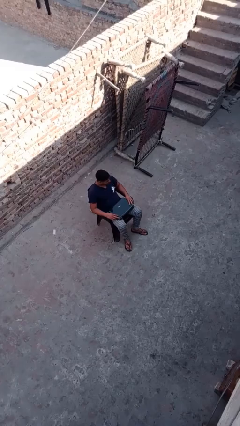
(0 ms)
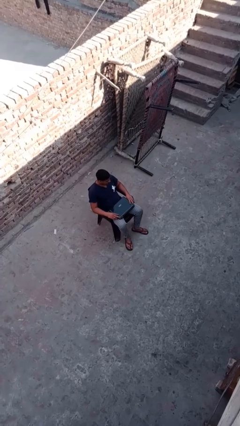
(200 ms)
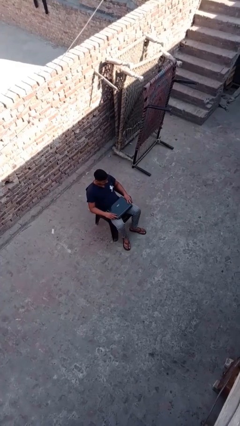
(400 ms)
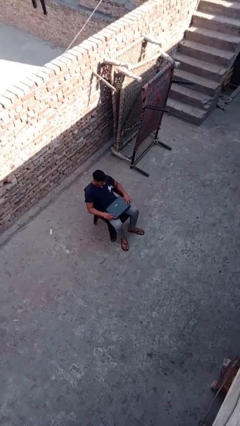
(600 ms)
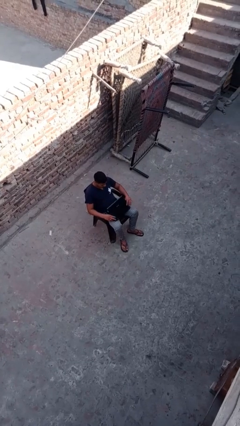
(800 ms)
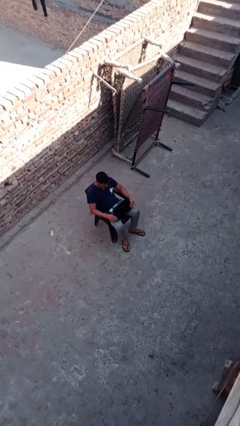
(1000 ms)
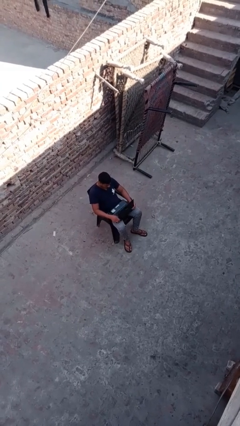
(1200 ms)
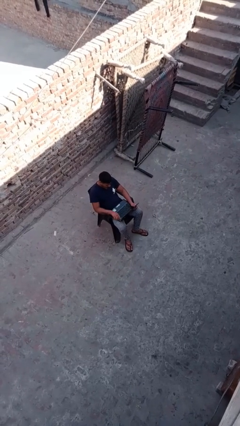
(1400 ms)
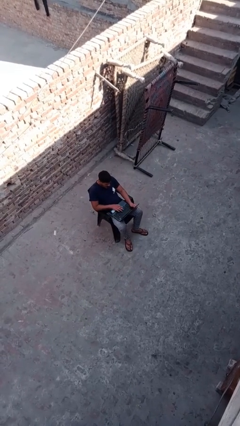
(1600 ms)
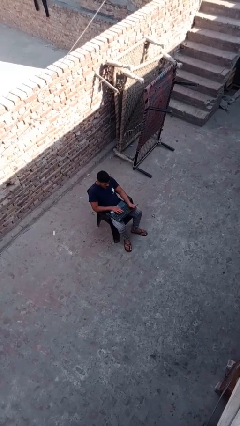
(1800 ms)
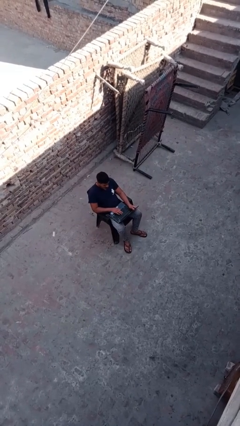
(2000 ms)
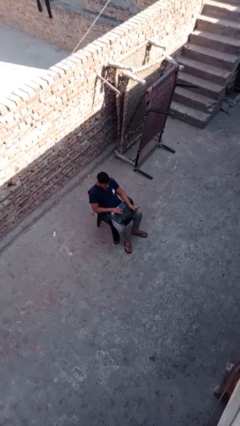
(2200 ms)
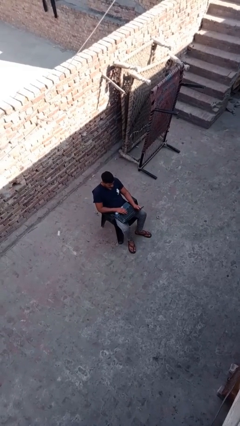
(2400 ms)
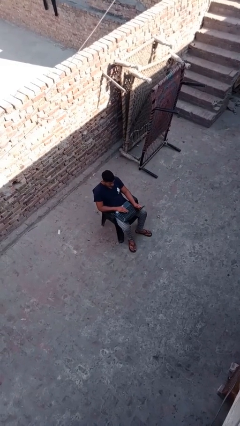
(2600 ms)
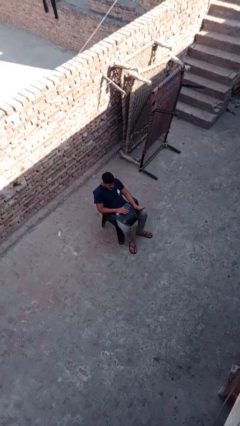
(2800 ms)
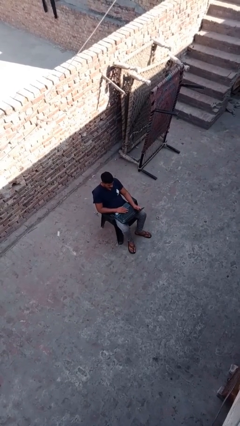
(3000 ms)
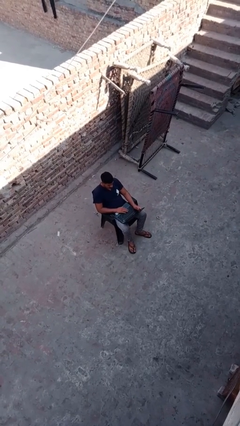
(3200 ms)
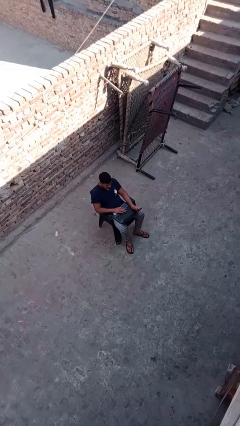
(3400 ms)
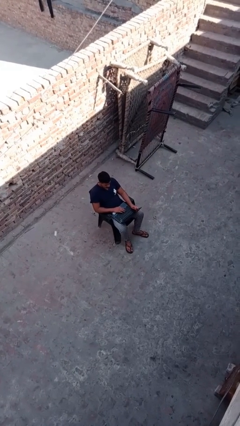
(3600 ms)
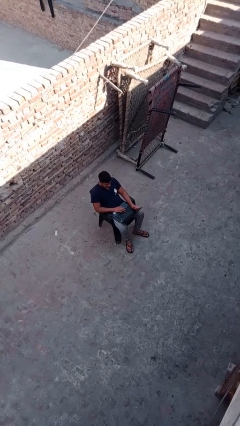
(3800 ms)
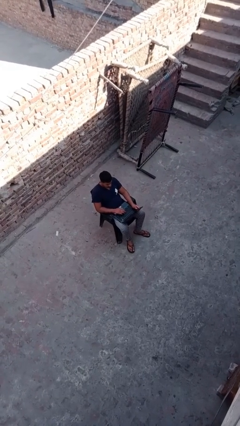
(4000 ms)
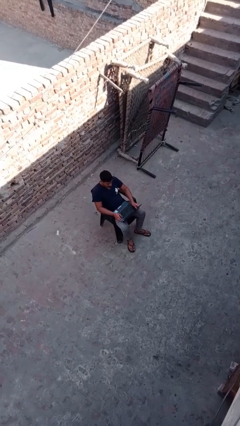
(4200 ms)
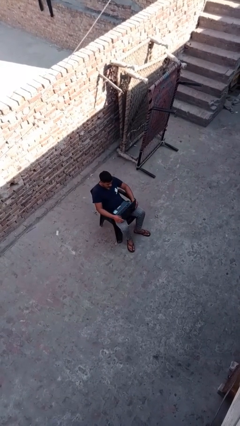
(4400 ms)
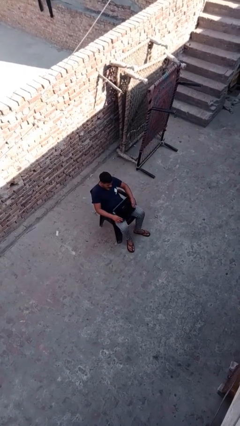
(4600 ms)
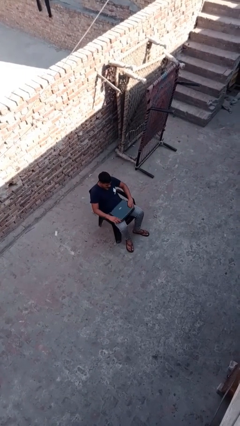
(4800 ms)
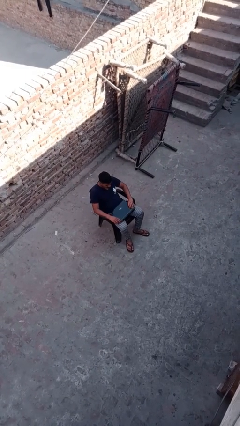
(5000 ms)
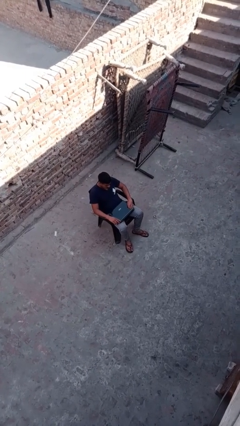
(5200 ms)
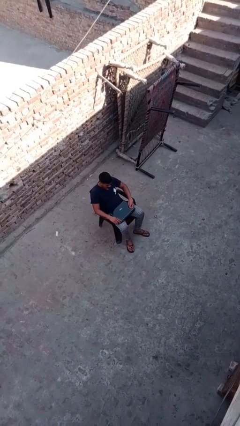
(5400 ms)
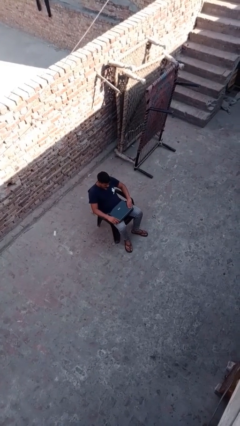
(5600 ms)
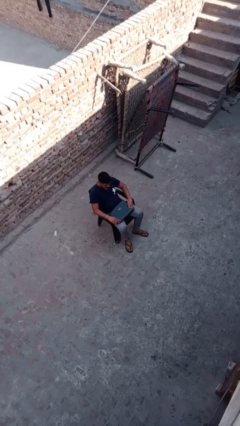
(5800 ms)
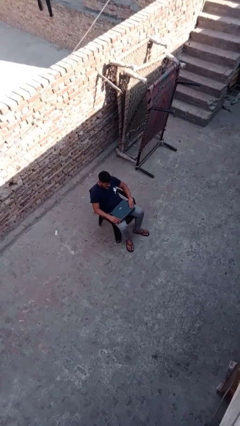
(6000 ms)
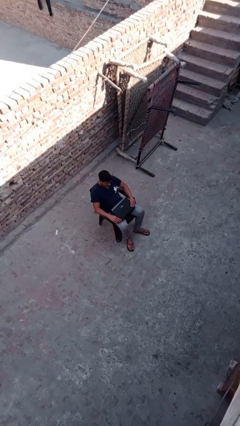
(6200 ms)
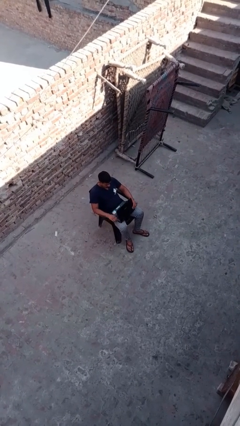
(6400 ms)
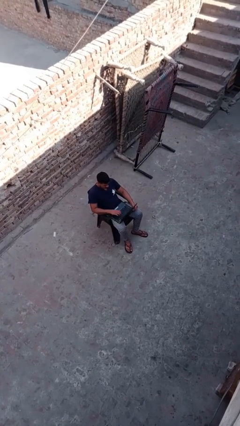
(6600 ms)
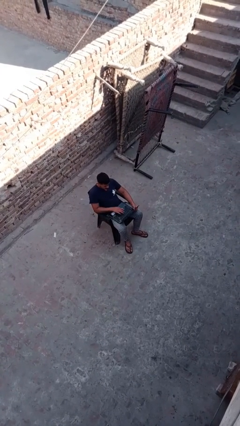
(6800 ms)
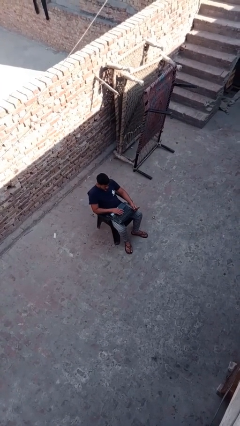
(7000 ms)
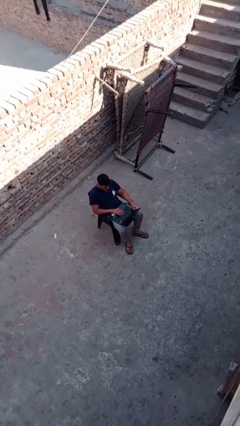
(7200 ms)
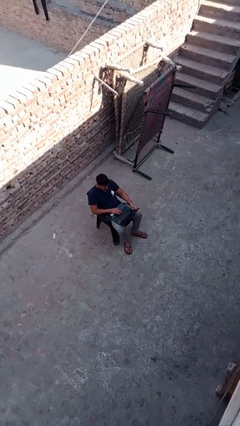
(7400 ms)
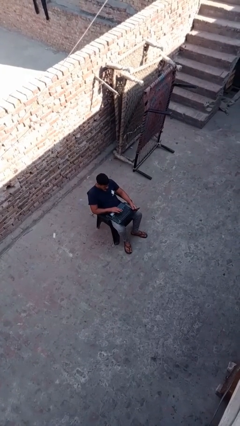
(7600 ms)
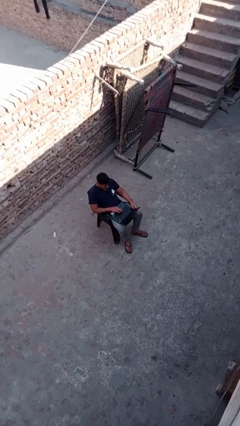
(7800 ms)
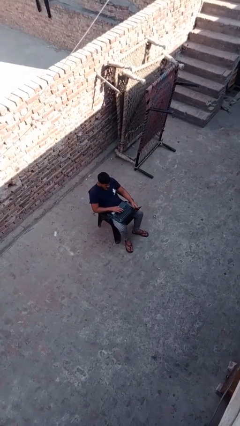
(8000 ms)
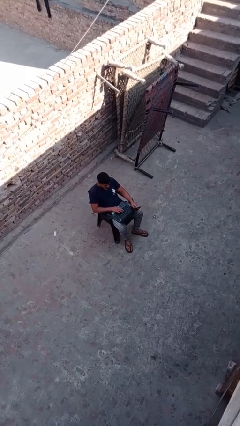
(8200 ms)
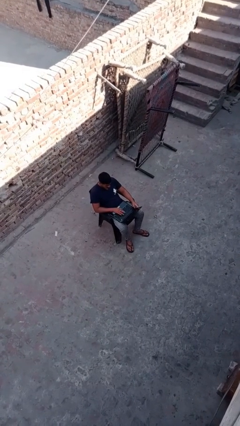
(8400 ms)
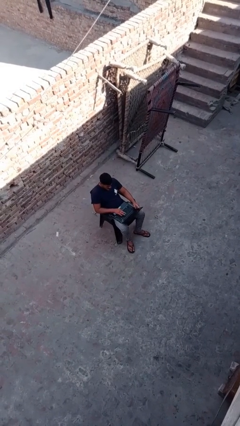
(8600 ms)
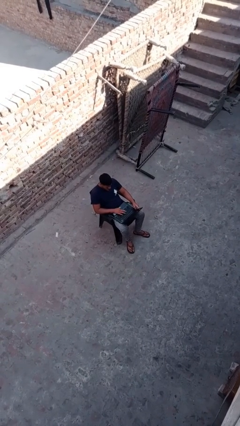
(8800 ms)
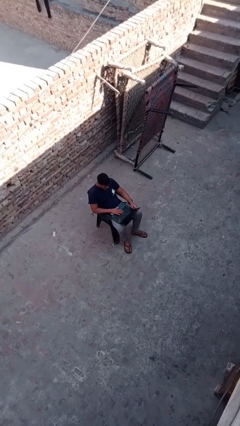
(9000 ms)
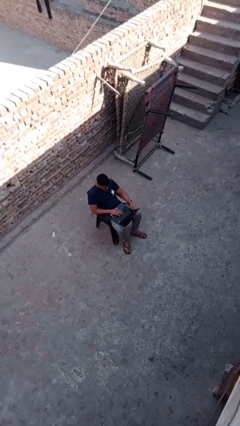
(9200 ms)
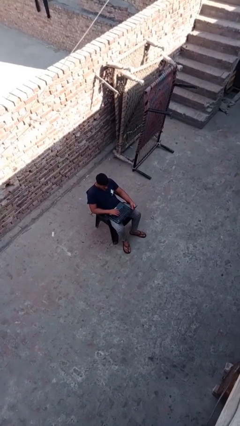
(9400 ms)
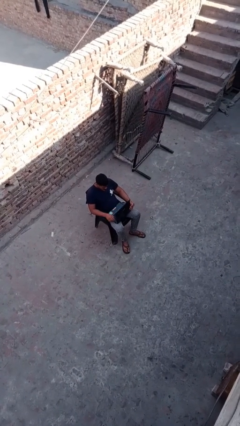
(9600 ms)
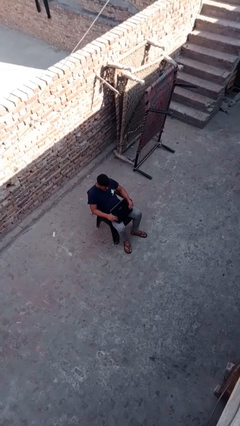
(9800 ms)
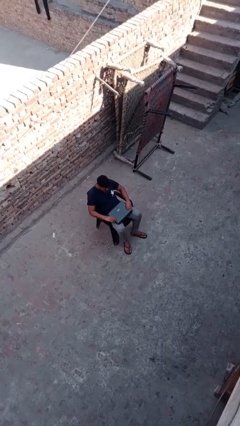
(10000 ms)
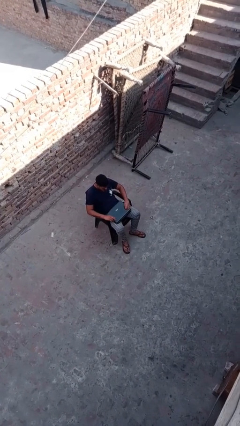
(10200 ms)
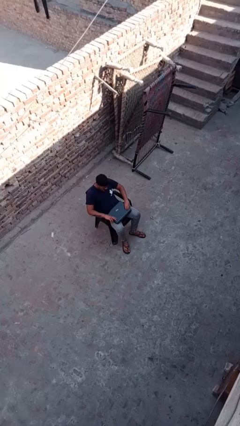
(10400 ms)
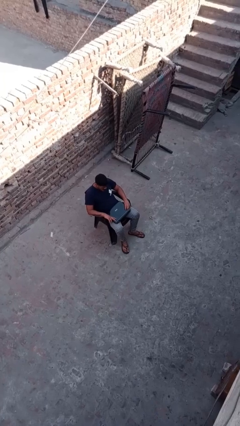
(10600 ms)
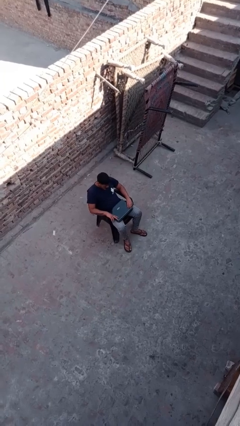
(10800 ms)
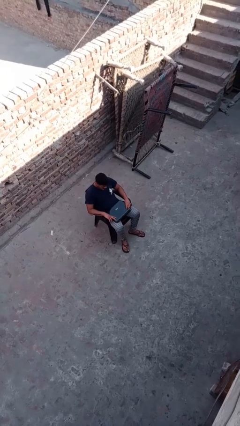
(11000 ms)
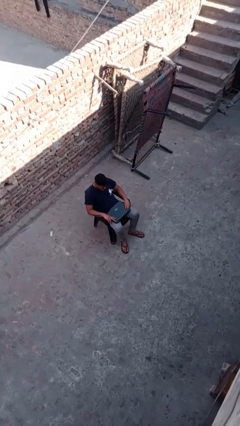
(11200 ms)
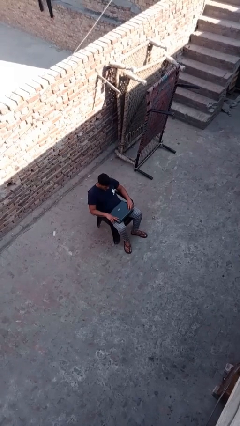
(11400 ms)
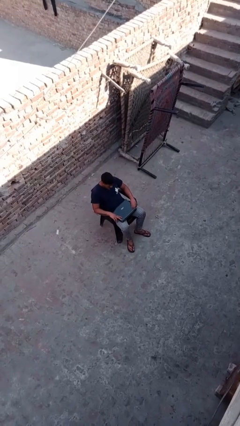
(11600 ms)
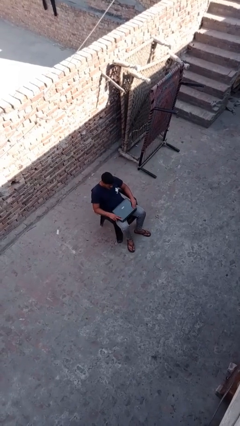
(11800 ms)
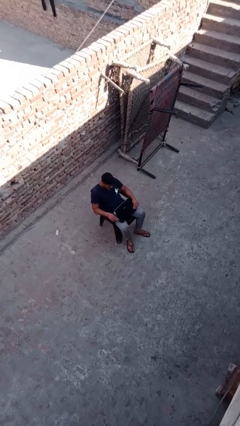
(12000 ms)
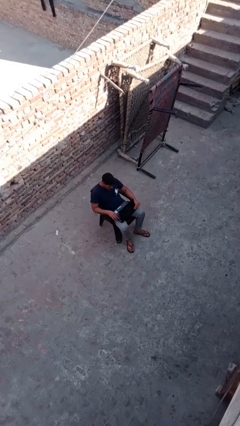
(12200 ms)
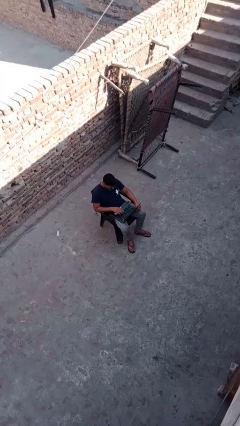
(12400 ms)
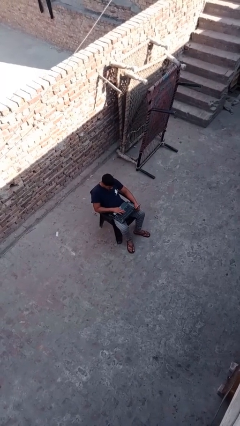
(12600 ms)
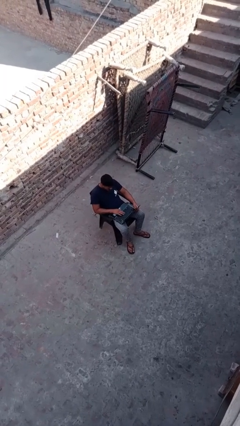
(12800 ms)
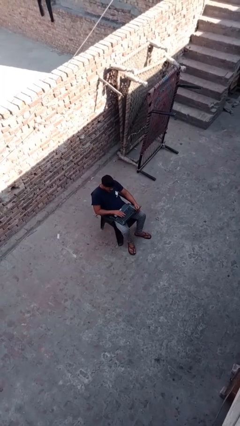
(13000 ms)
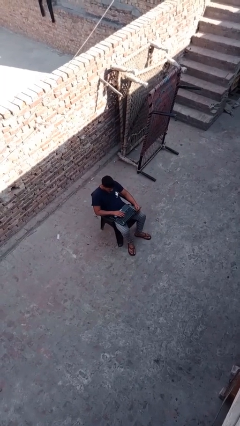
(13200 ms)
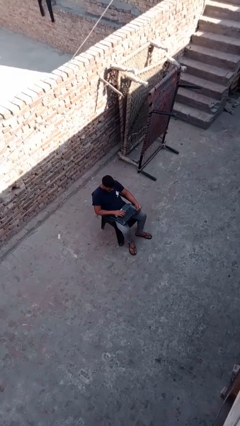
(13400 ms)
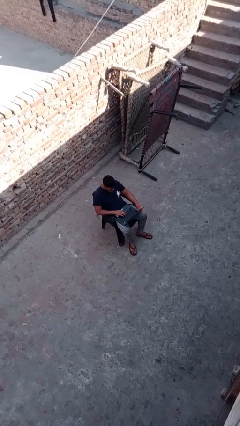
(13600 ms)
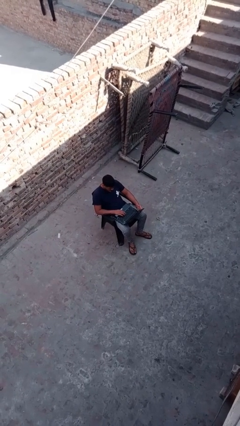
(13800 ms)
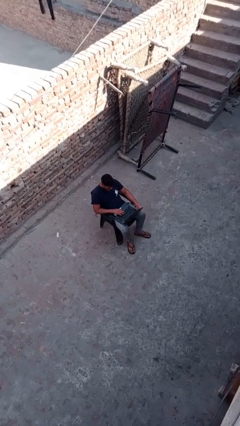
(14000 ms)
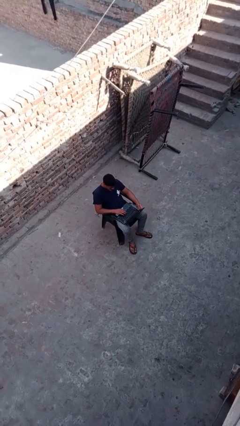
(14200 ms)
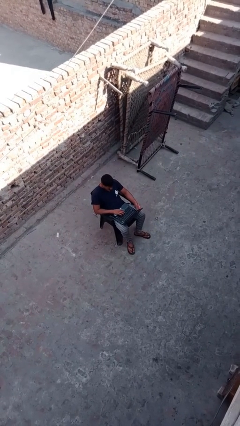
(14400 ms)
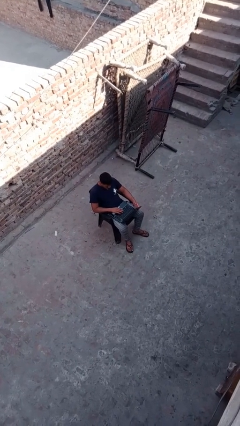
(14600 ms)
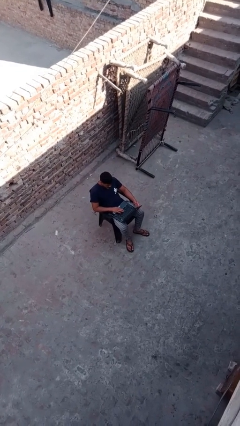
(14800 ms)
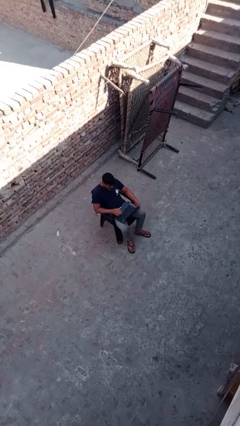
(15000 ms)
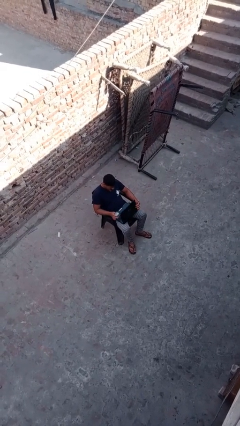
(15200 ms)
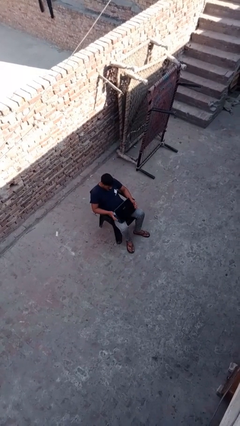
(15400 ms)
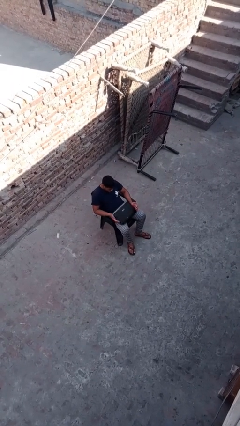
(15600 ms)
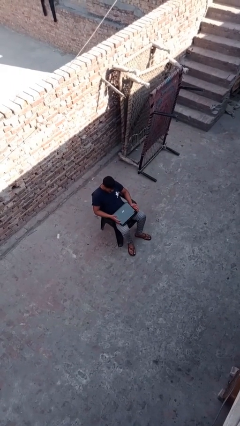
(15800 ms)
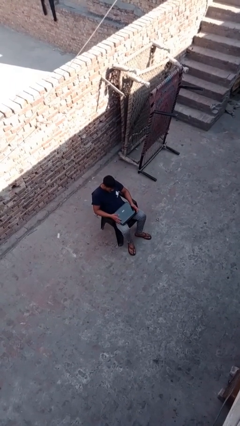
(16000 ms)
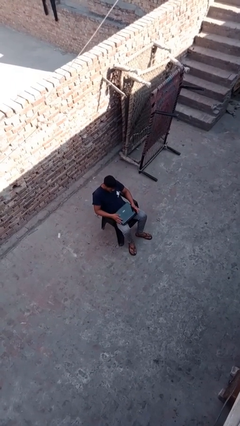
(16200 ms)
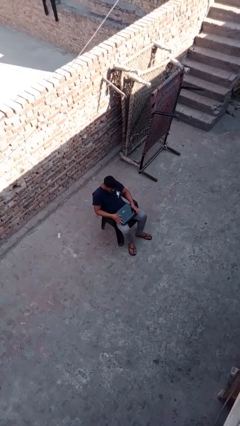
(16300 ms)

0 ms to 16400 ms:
person interacts with laptop

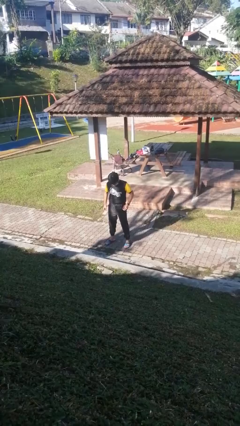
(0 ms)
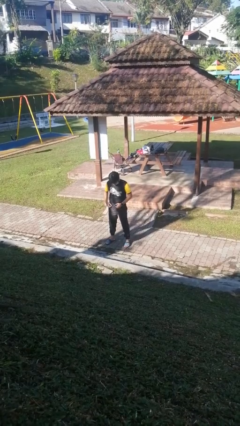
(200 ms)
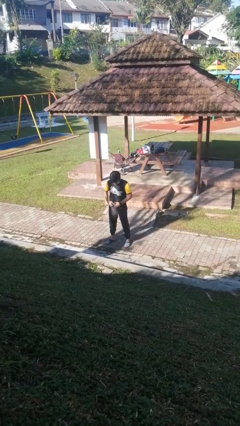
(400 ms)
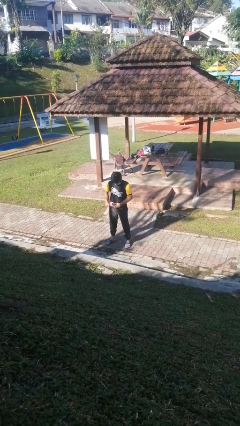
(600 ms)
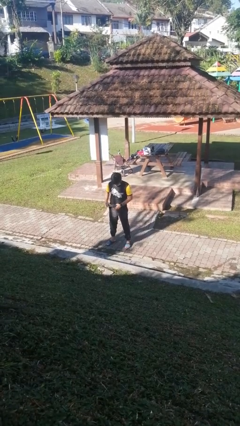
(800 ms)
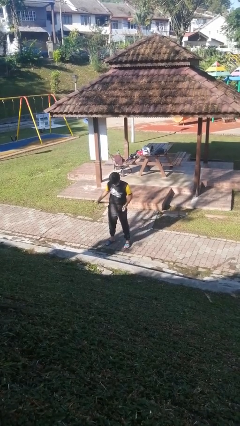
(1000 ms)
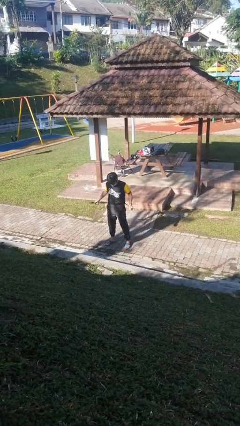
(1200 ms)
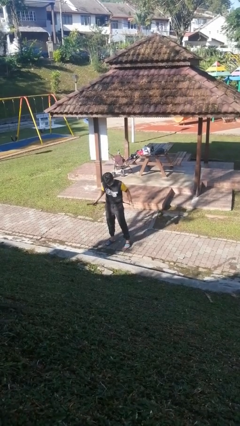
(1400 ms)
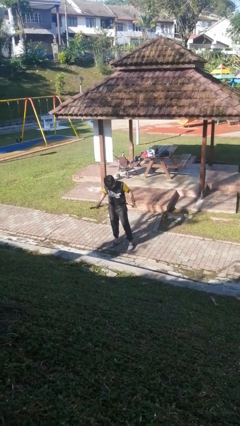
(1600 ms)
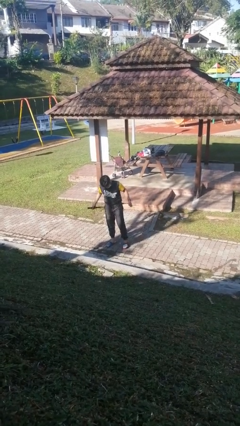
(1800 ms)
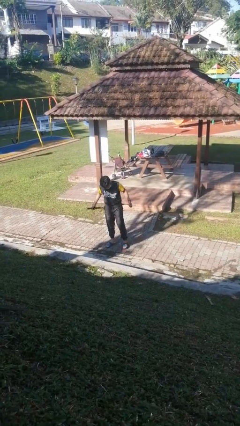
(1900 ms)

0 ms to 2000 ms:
person takes off belt
